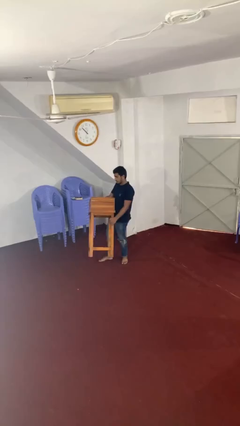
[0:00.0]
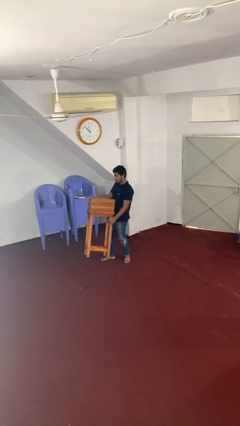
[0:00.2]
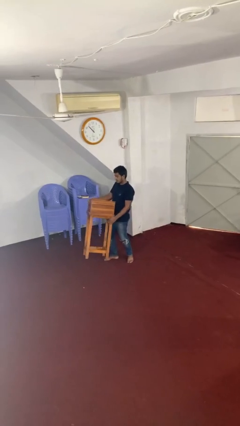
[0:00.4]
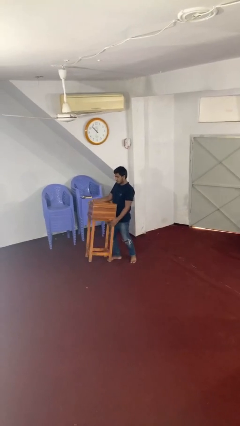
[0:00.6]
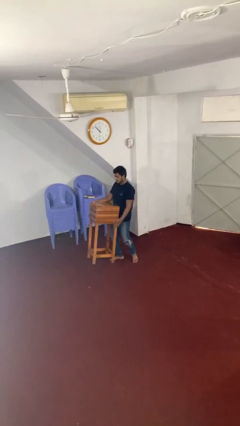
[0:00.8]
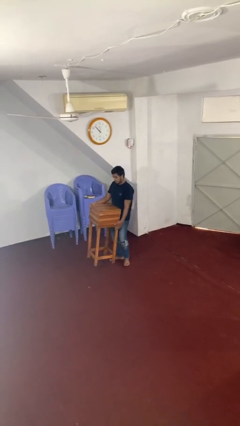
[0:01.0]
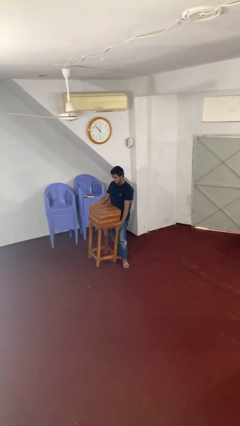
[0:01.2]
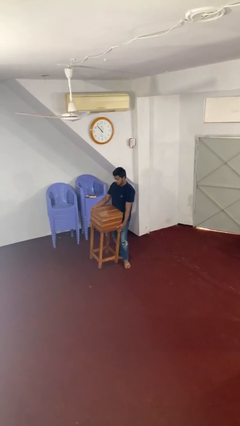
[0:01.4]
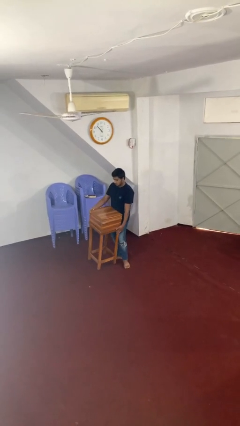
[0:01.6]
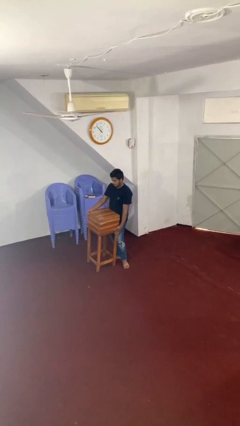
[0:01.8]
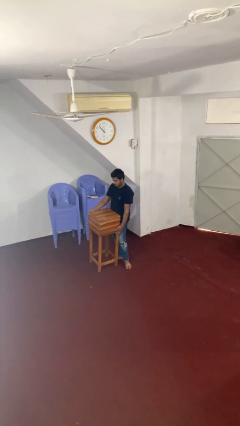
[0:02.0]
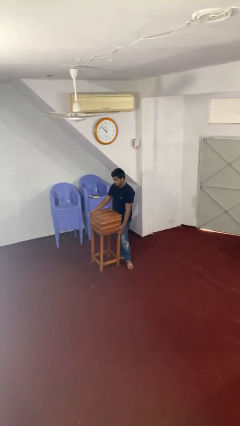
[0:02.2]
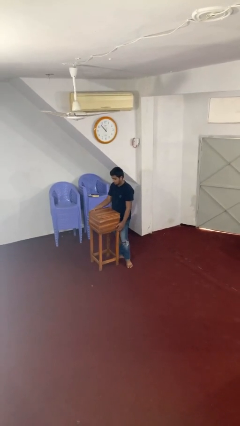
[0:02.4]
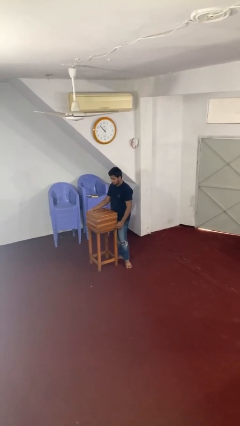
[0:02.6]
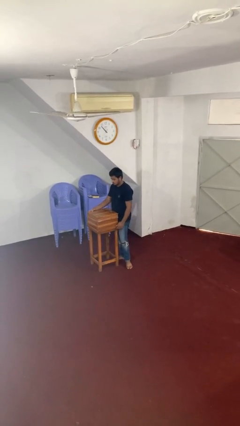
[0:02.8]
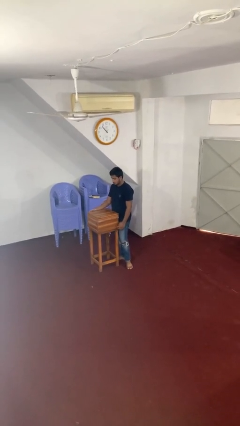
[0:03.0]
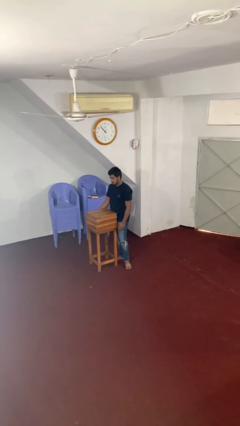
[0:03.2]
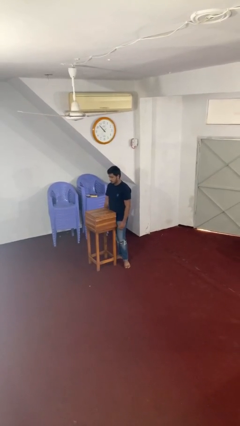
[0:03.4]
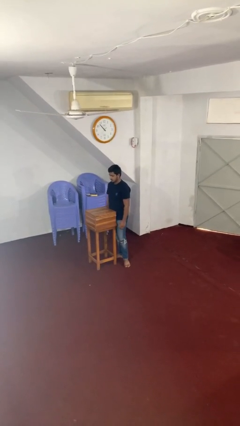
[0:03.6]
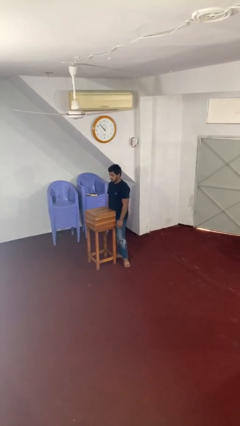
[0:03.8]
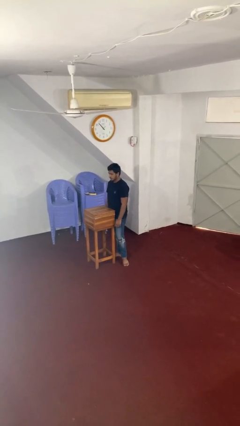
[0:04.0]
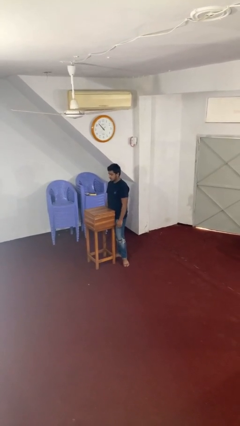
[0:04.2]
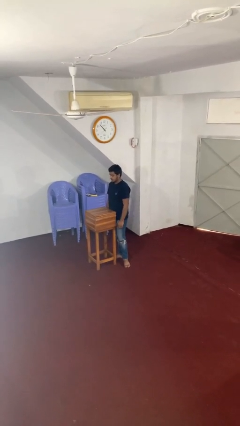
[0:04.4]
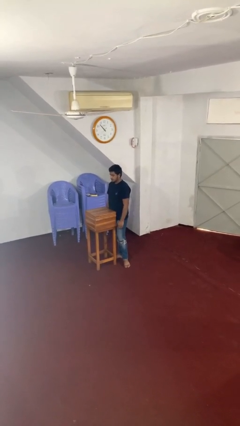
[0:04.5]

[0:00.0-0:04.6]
person puts down object on floor

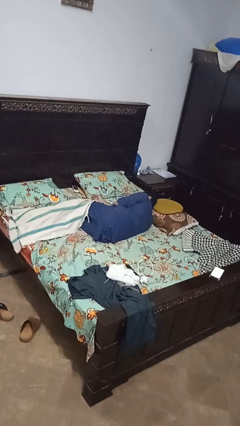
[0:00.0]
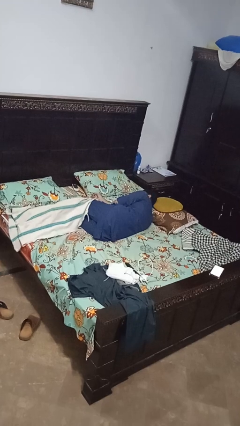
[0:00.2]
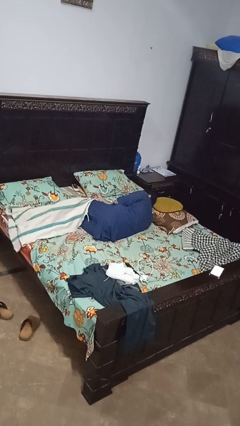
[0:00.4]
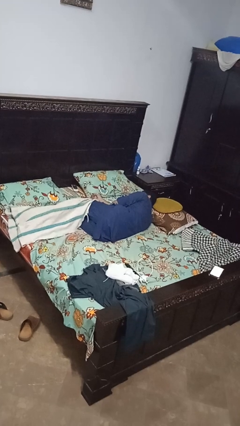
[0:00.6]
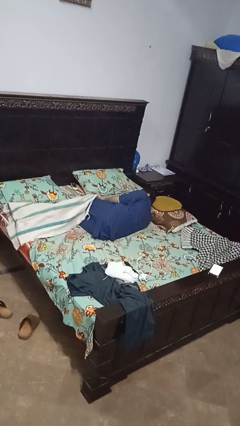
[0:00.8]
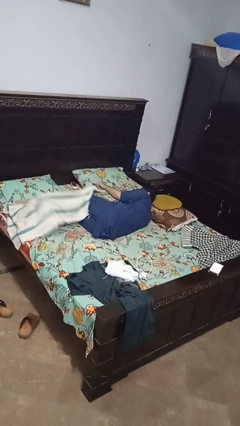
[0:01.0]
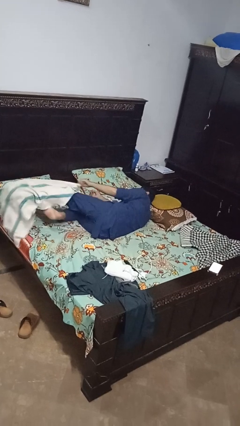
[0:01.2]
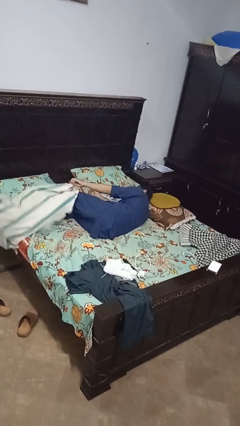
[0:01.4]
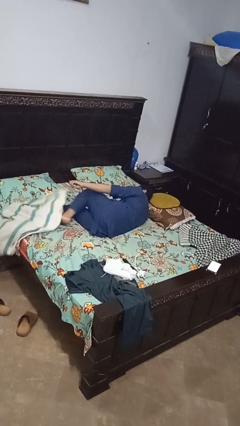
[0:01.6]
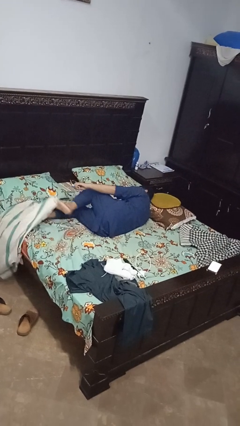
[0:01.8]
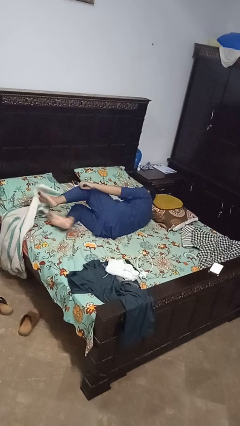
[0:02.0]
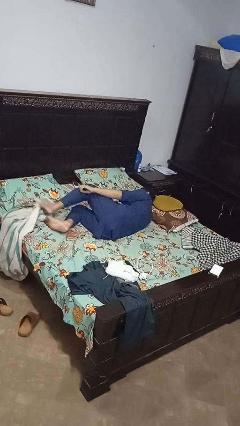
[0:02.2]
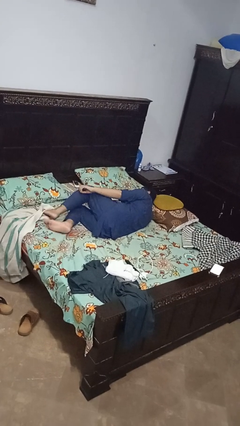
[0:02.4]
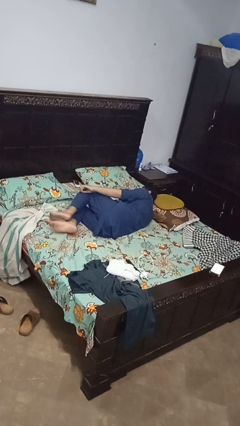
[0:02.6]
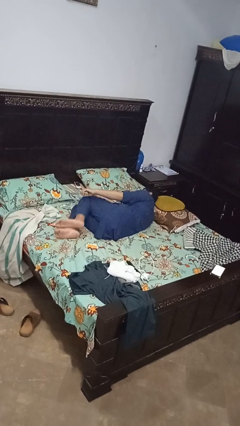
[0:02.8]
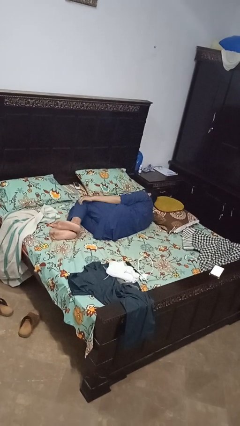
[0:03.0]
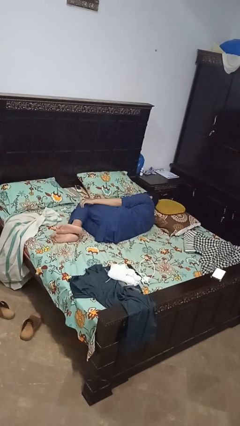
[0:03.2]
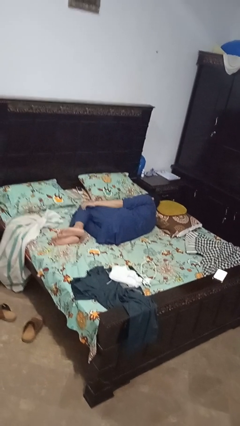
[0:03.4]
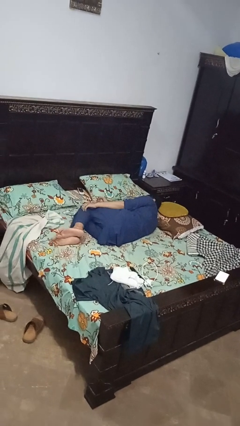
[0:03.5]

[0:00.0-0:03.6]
person uncovers with bedsheets

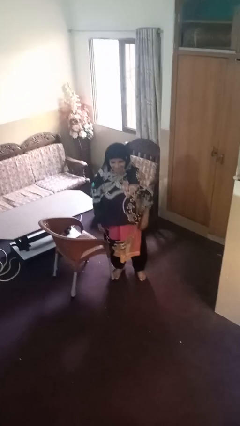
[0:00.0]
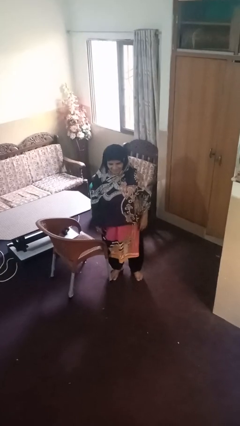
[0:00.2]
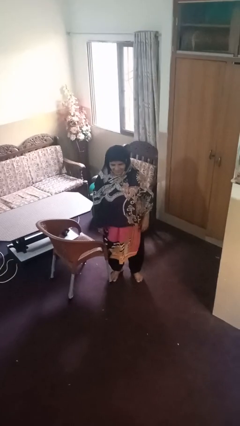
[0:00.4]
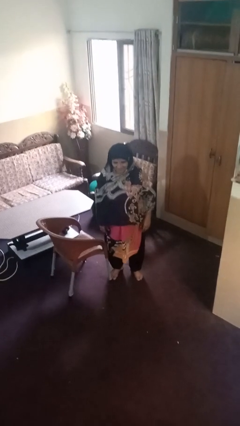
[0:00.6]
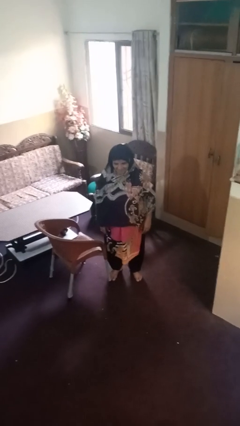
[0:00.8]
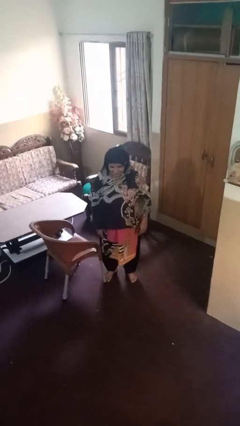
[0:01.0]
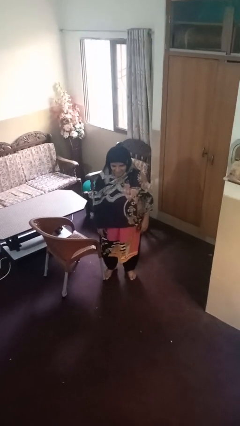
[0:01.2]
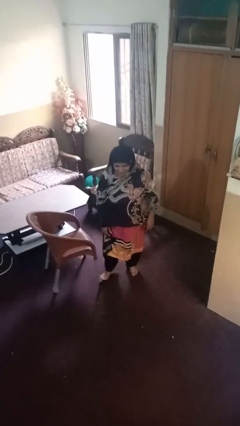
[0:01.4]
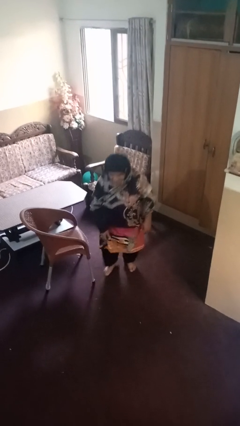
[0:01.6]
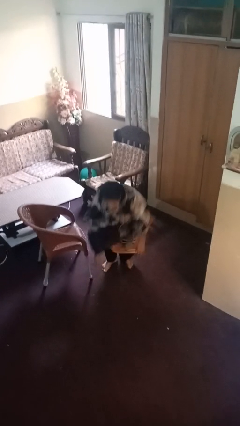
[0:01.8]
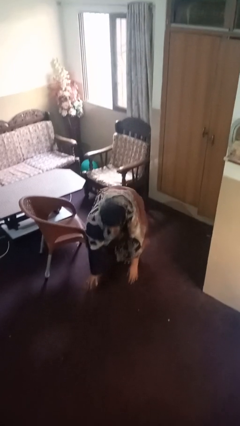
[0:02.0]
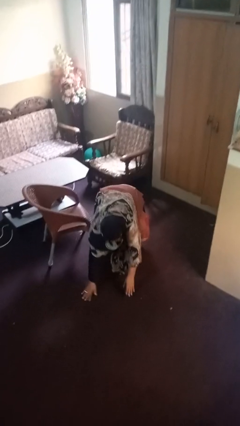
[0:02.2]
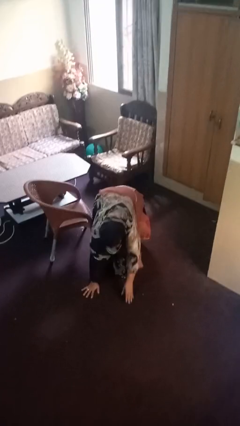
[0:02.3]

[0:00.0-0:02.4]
person trips on object on floor

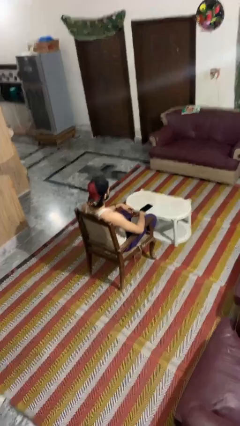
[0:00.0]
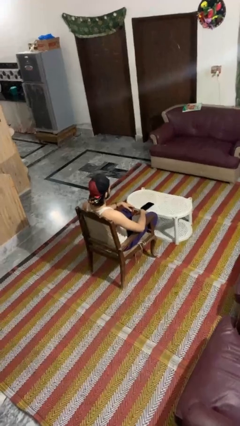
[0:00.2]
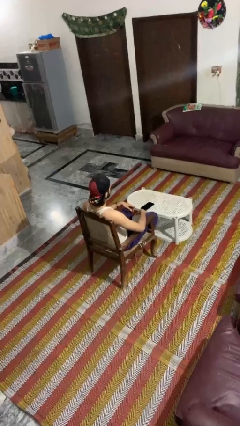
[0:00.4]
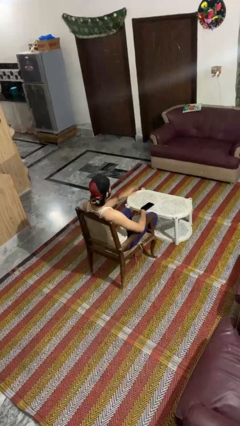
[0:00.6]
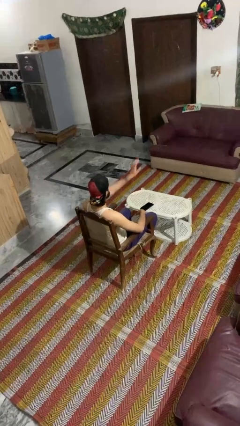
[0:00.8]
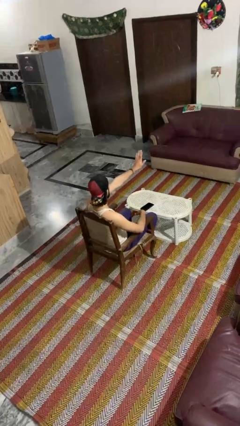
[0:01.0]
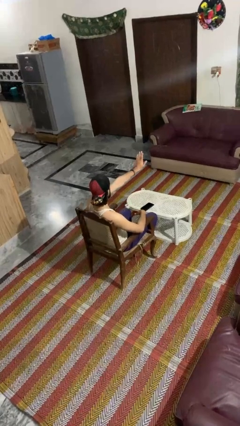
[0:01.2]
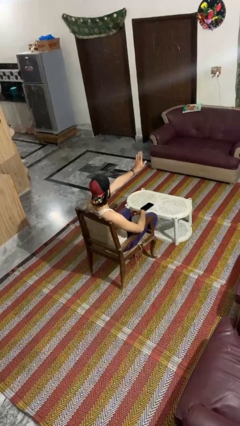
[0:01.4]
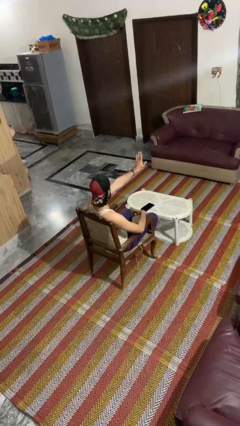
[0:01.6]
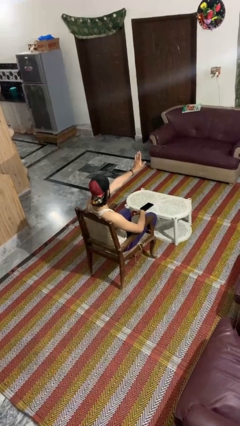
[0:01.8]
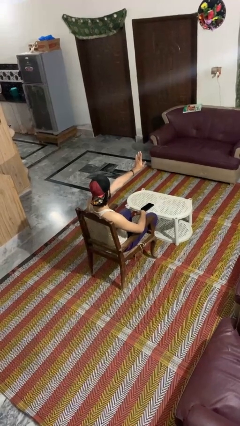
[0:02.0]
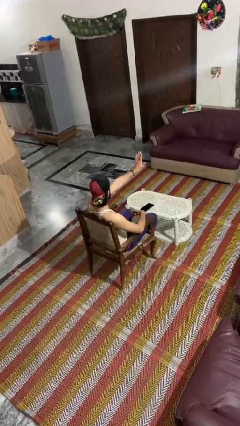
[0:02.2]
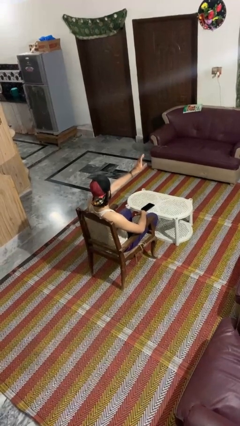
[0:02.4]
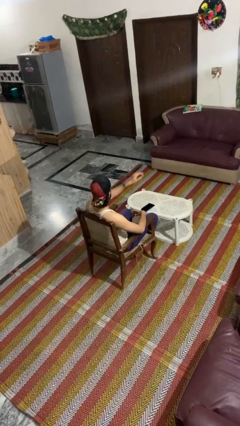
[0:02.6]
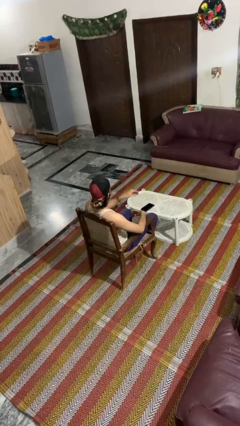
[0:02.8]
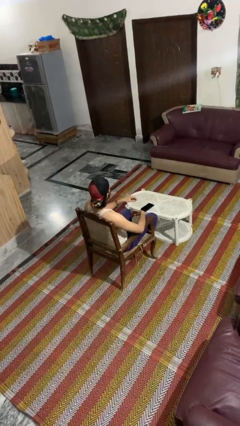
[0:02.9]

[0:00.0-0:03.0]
person gestures stop

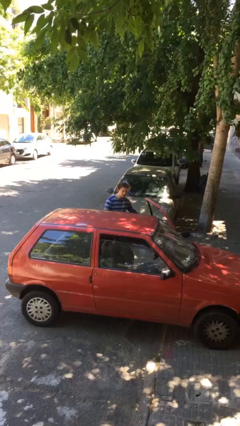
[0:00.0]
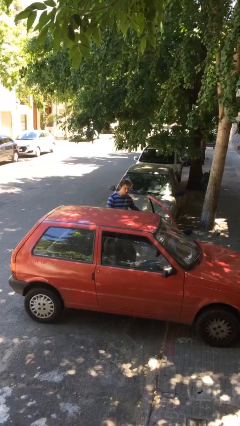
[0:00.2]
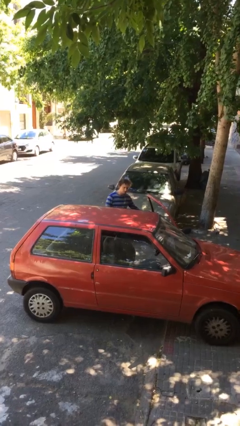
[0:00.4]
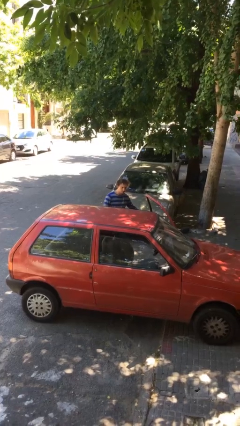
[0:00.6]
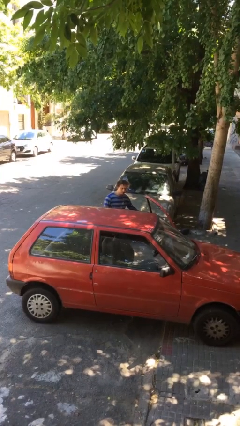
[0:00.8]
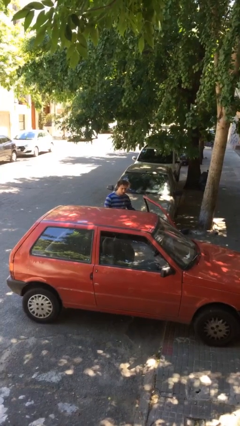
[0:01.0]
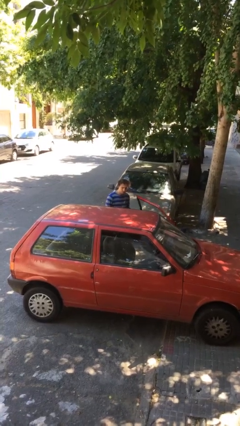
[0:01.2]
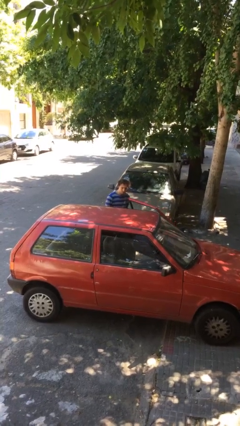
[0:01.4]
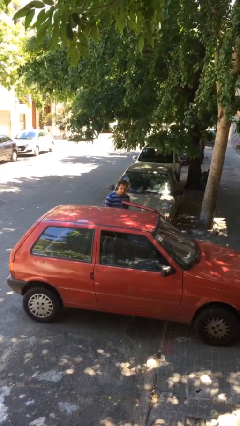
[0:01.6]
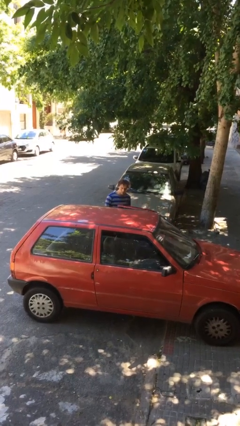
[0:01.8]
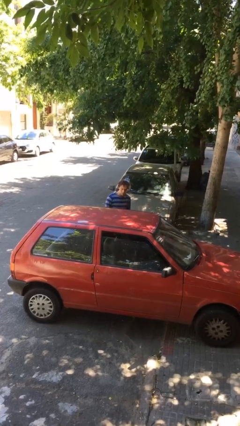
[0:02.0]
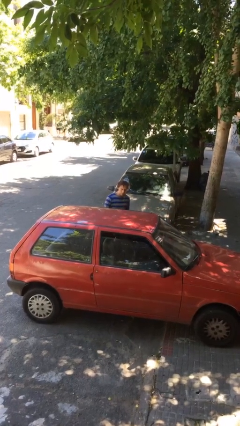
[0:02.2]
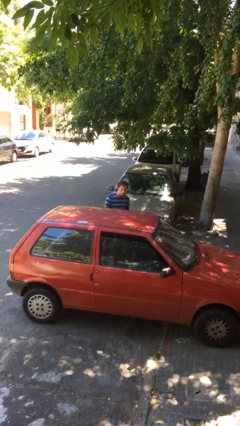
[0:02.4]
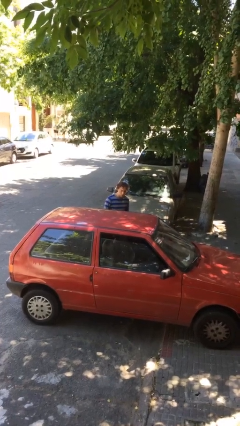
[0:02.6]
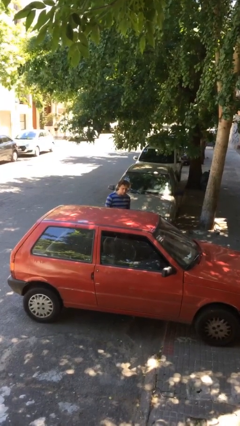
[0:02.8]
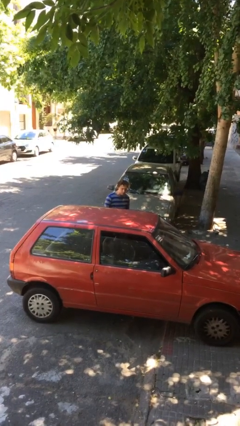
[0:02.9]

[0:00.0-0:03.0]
person closes car door

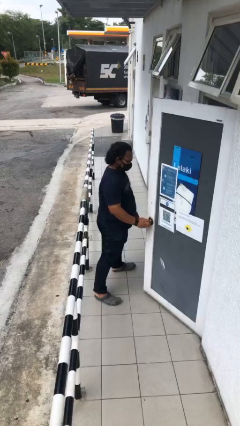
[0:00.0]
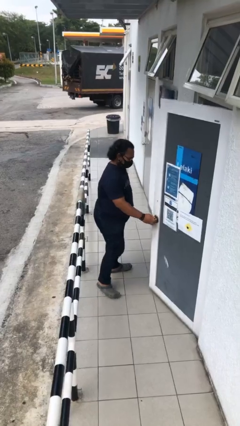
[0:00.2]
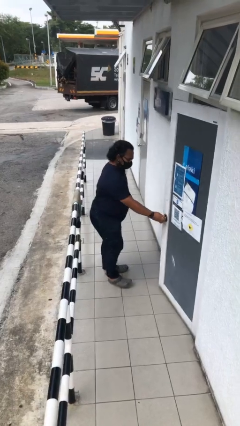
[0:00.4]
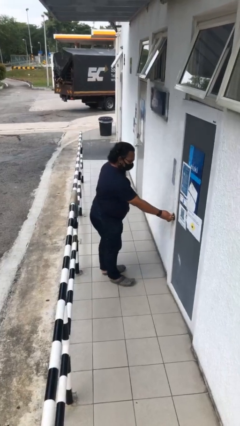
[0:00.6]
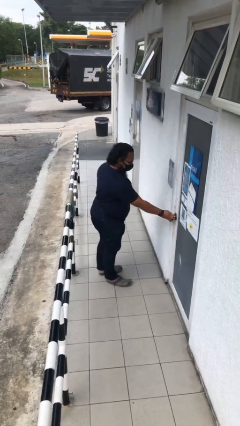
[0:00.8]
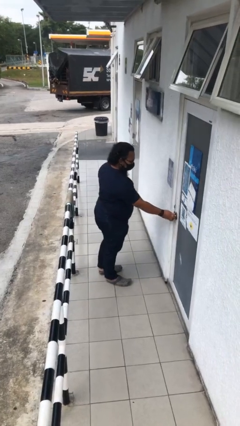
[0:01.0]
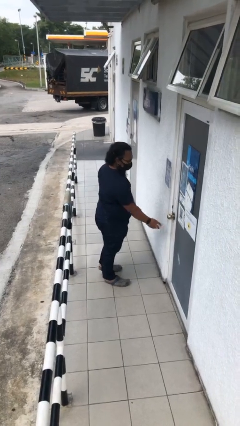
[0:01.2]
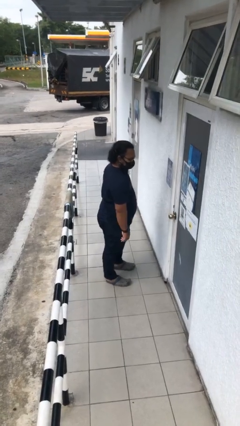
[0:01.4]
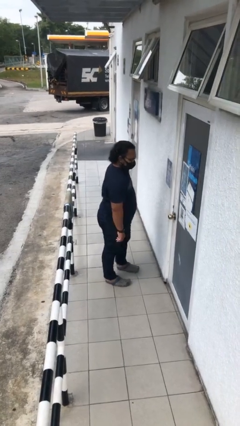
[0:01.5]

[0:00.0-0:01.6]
person closes facility door
